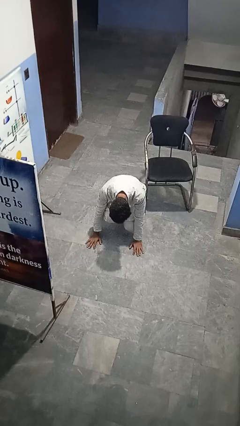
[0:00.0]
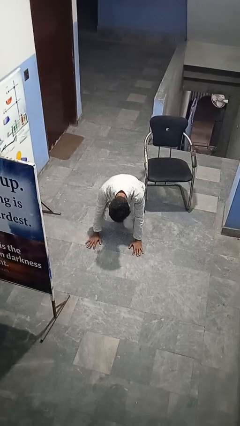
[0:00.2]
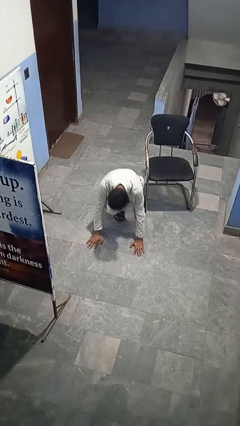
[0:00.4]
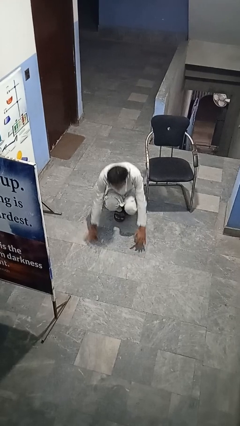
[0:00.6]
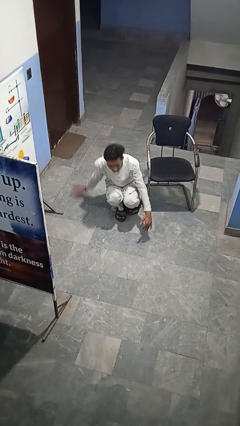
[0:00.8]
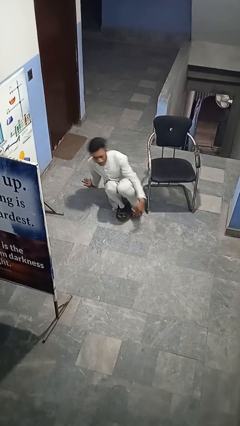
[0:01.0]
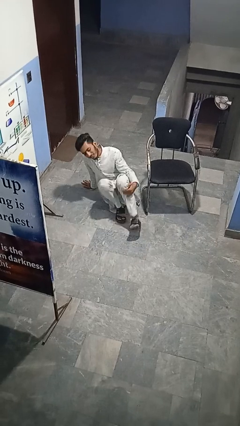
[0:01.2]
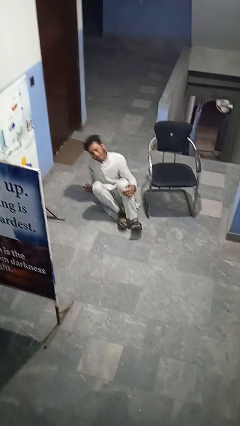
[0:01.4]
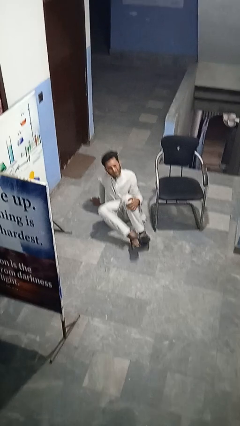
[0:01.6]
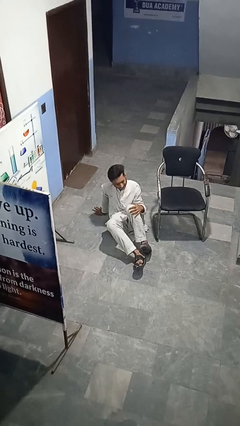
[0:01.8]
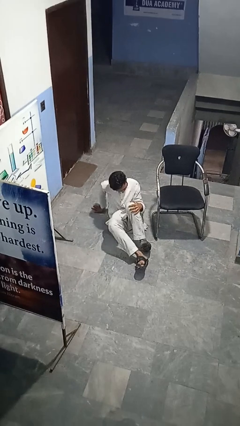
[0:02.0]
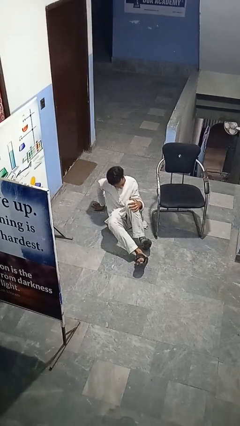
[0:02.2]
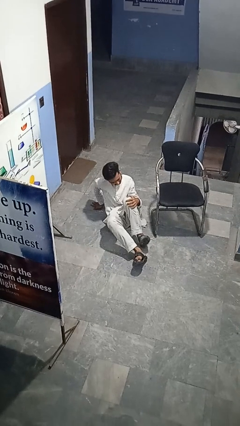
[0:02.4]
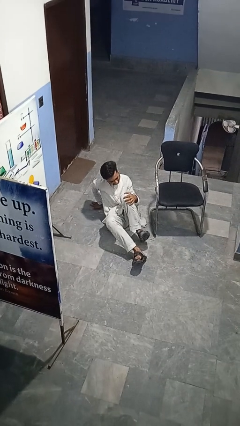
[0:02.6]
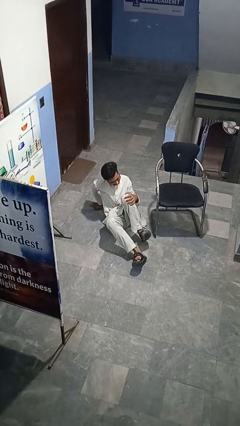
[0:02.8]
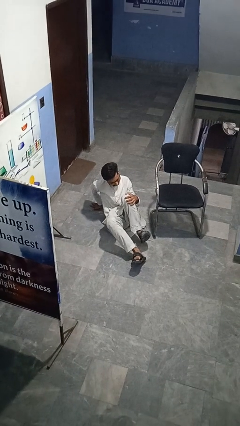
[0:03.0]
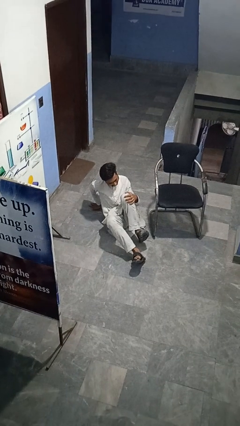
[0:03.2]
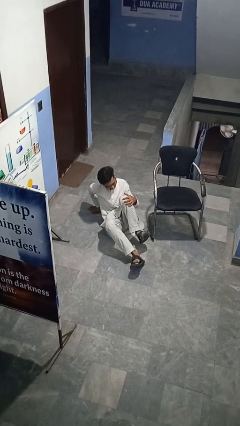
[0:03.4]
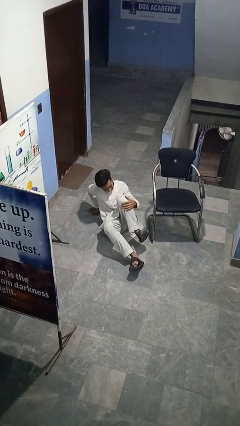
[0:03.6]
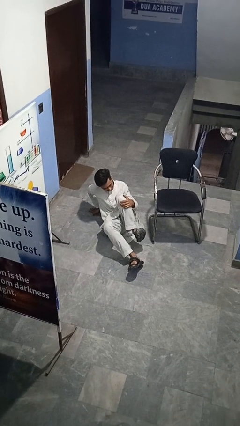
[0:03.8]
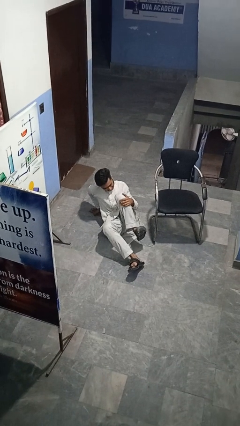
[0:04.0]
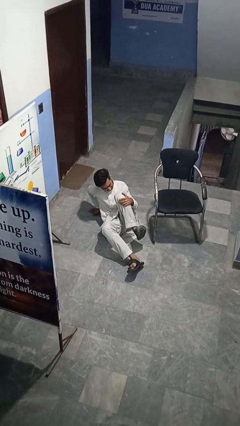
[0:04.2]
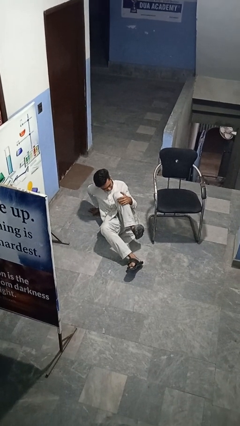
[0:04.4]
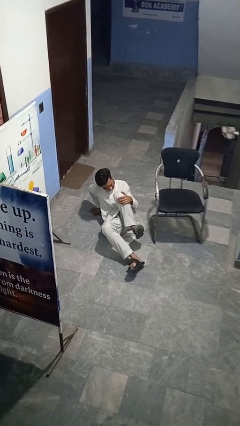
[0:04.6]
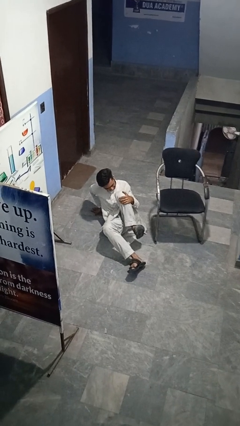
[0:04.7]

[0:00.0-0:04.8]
person lies down on floor

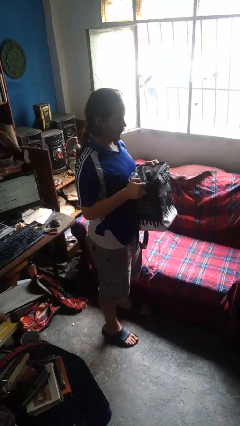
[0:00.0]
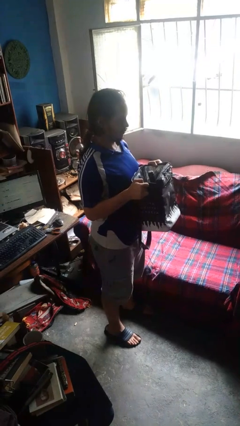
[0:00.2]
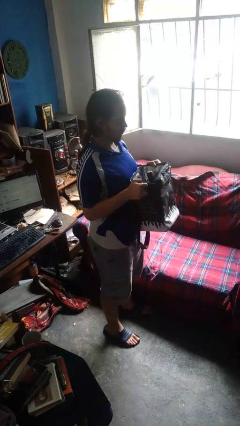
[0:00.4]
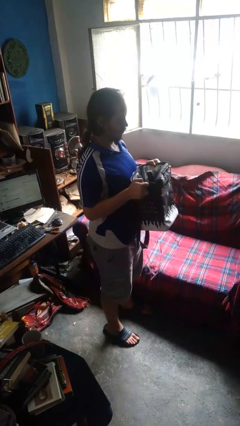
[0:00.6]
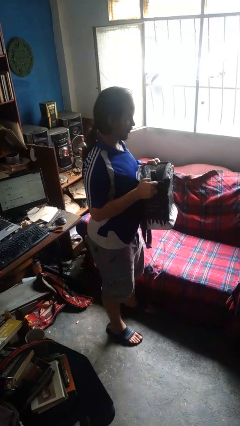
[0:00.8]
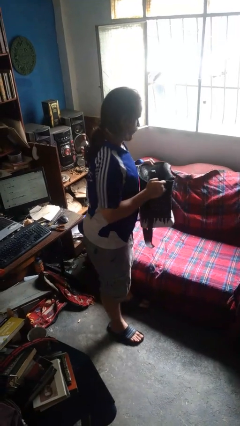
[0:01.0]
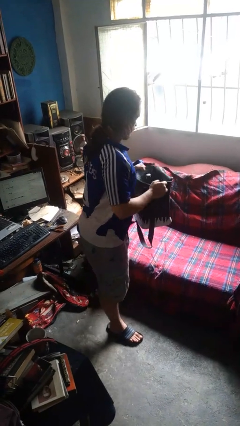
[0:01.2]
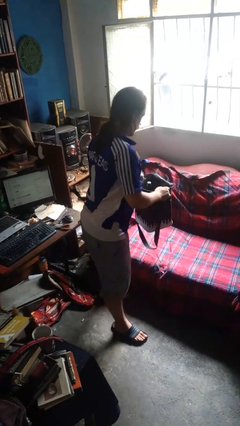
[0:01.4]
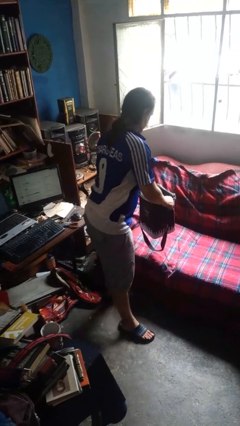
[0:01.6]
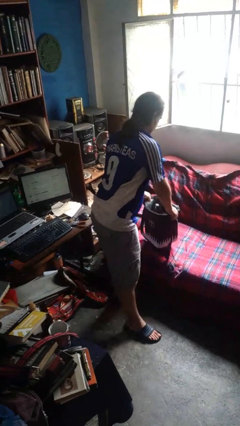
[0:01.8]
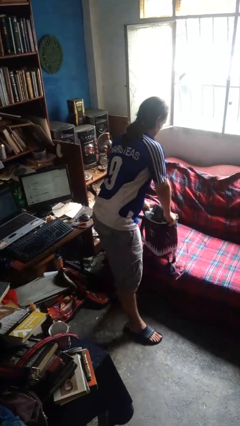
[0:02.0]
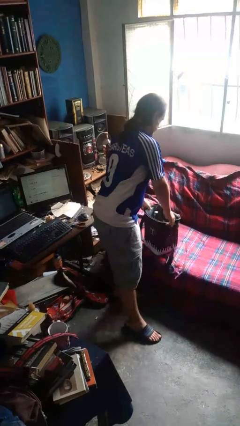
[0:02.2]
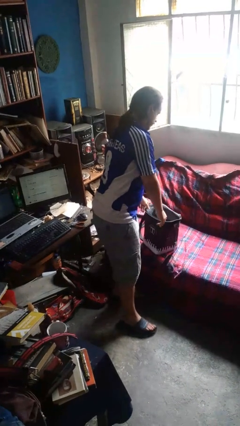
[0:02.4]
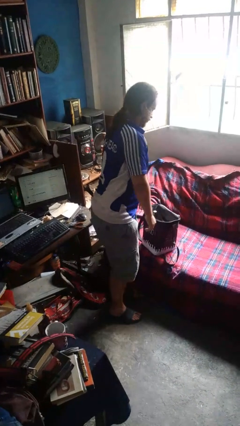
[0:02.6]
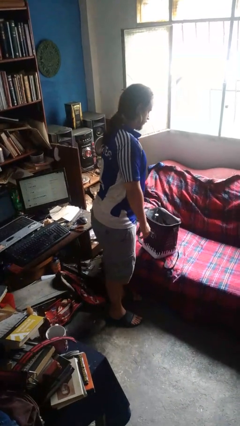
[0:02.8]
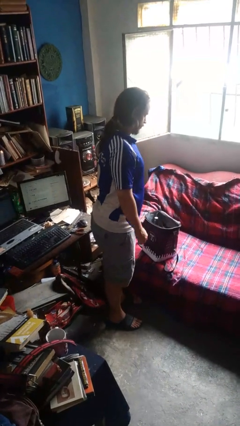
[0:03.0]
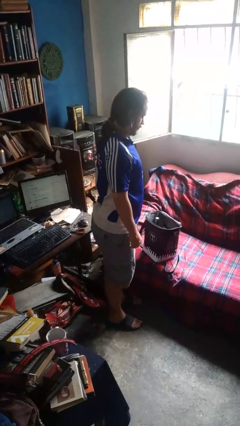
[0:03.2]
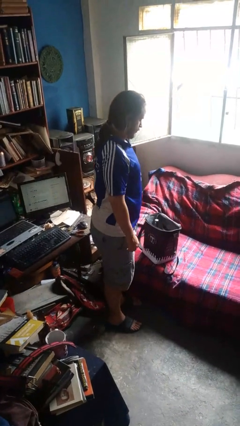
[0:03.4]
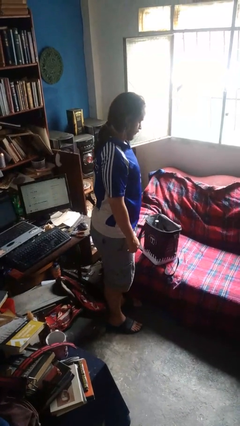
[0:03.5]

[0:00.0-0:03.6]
person puts down object on couch

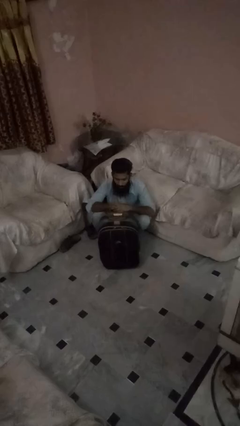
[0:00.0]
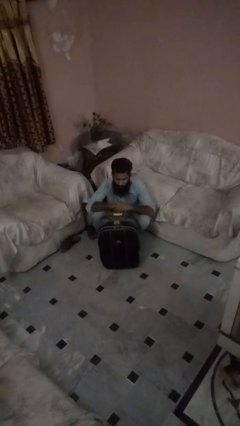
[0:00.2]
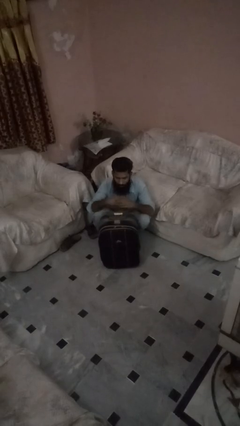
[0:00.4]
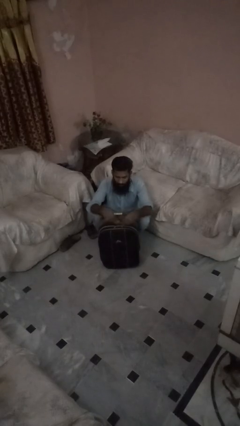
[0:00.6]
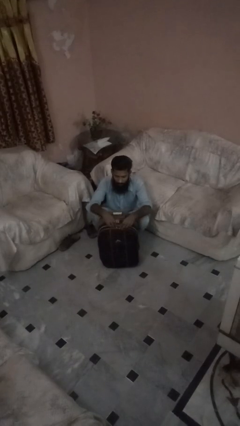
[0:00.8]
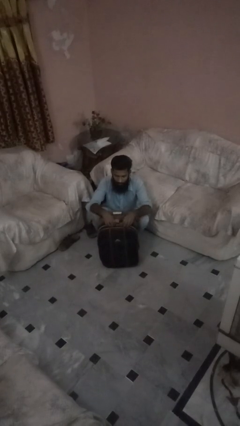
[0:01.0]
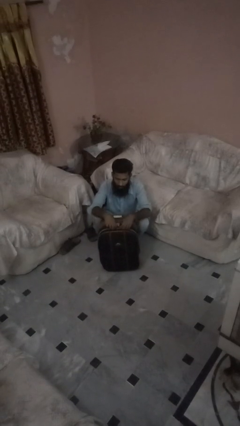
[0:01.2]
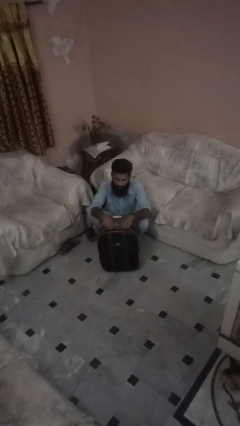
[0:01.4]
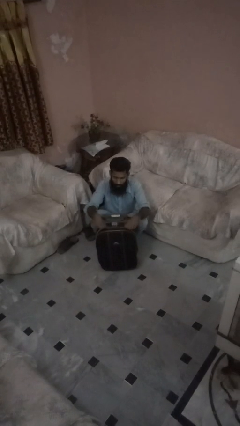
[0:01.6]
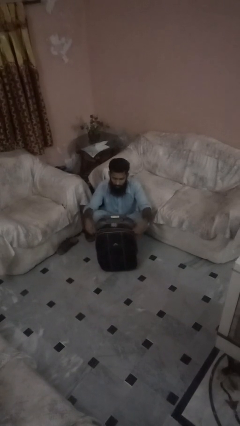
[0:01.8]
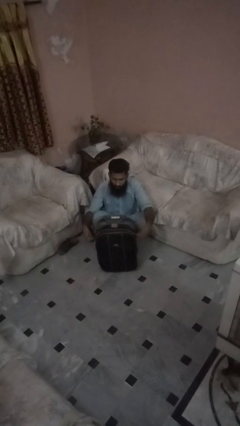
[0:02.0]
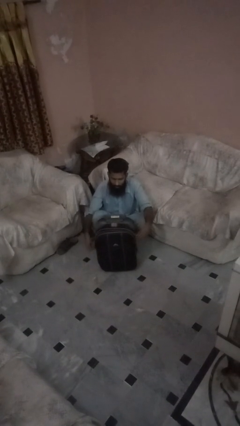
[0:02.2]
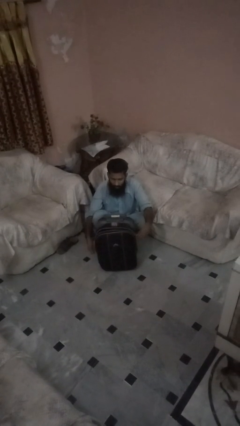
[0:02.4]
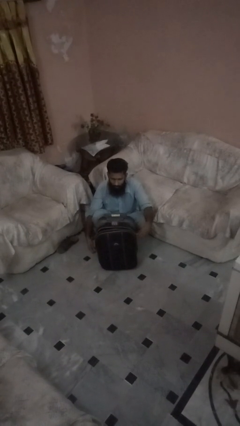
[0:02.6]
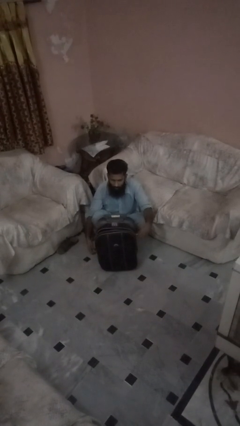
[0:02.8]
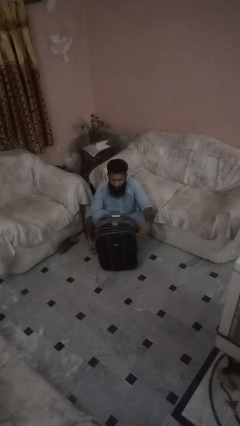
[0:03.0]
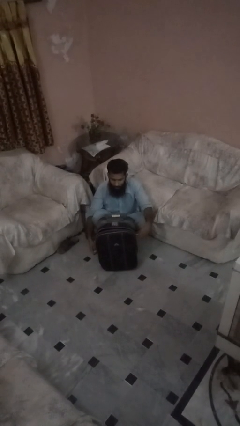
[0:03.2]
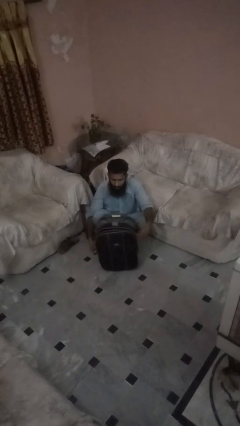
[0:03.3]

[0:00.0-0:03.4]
person opens suitcase

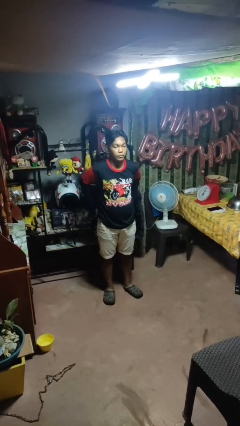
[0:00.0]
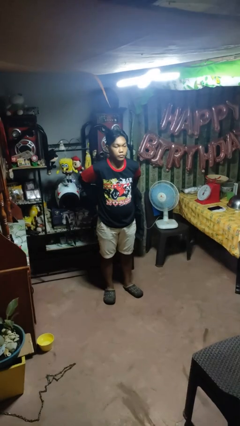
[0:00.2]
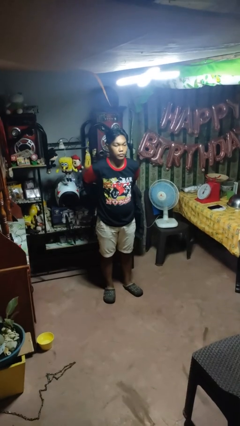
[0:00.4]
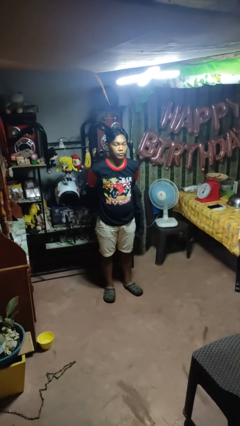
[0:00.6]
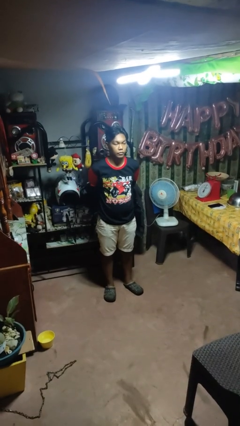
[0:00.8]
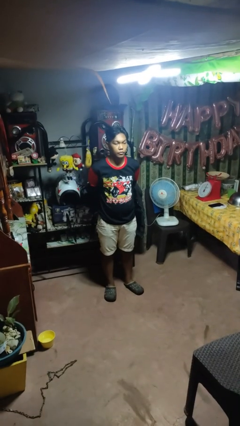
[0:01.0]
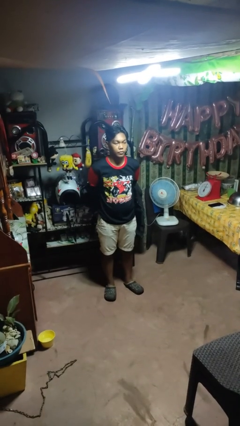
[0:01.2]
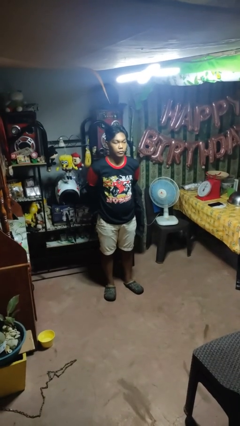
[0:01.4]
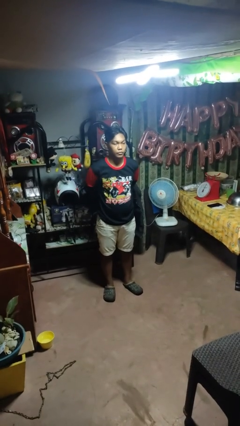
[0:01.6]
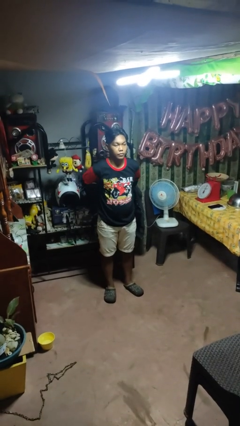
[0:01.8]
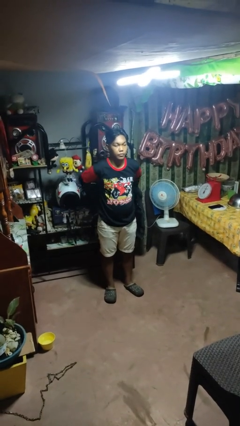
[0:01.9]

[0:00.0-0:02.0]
person puts hands in back pockets

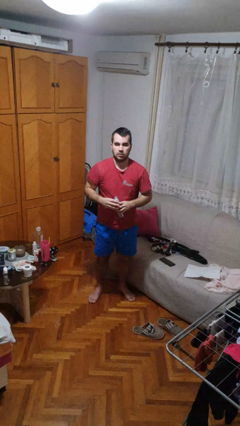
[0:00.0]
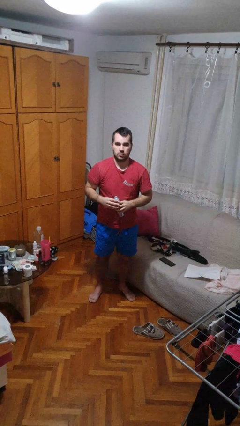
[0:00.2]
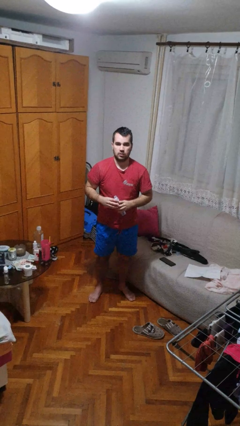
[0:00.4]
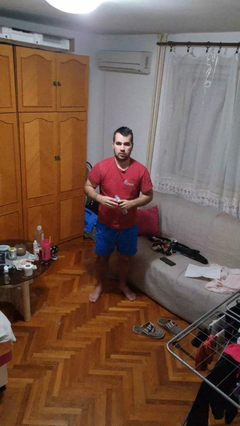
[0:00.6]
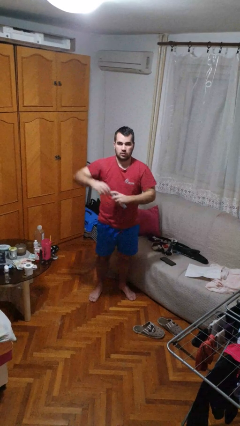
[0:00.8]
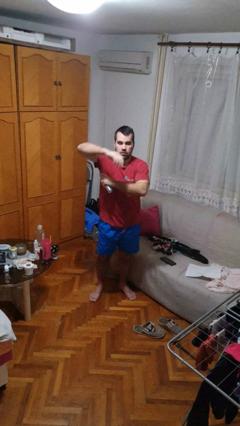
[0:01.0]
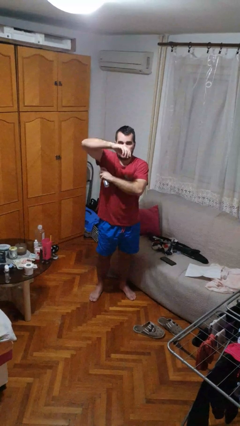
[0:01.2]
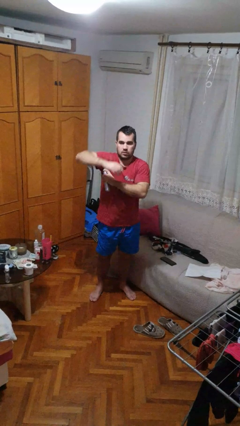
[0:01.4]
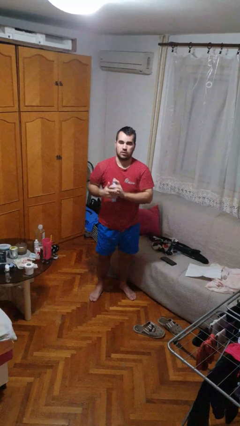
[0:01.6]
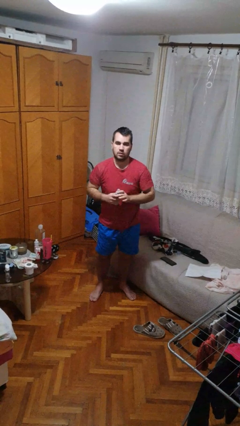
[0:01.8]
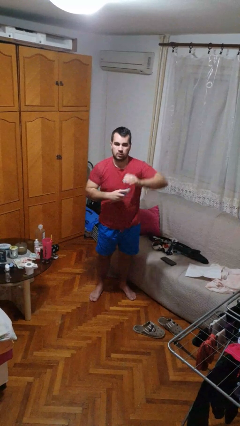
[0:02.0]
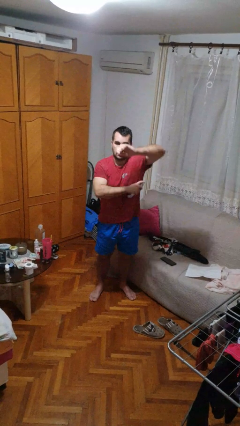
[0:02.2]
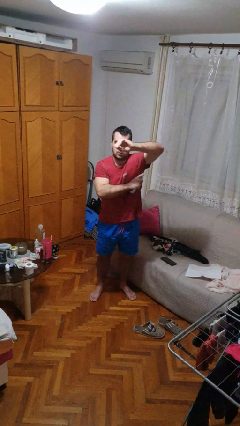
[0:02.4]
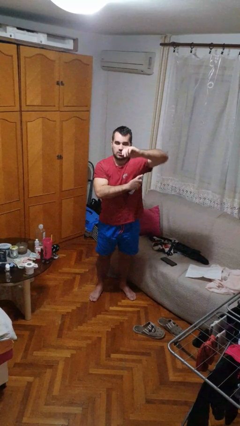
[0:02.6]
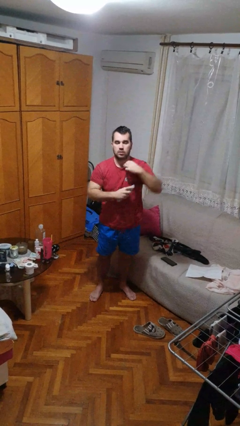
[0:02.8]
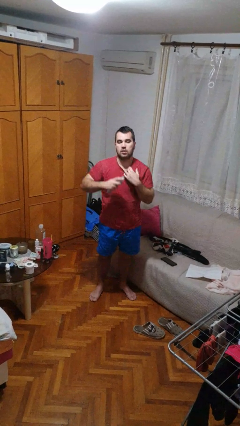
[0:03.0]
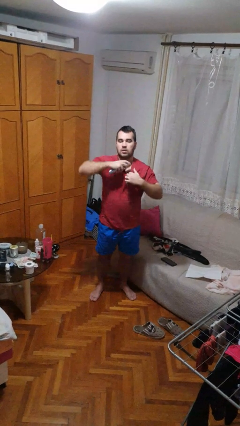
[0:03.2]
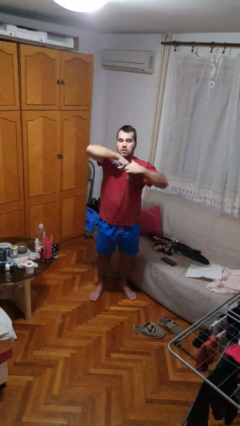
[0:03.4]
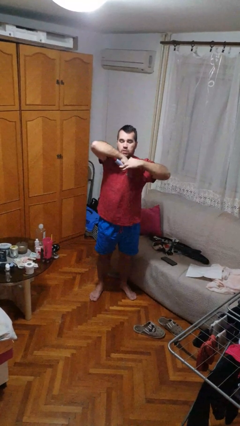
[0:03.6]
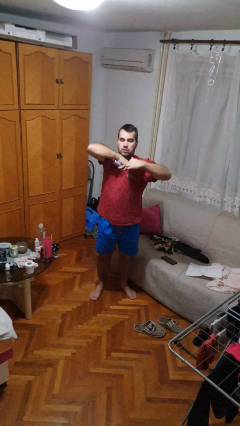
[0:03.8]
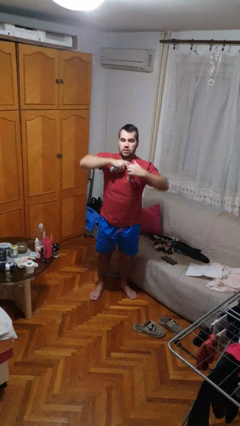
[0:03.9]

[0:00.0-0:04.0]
person applies deodorant
